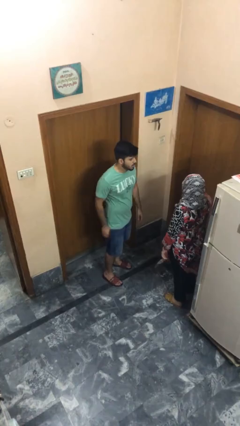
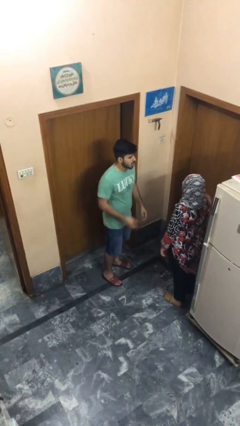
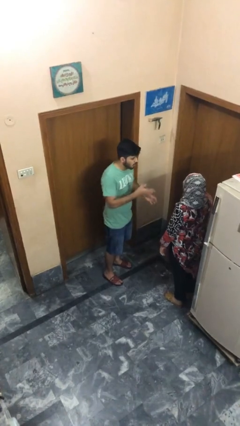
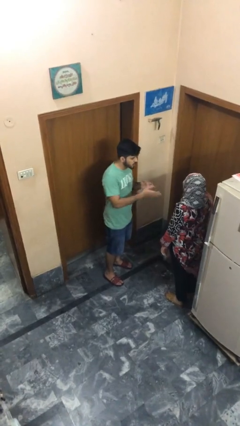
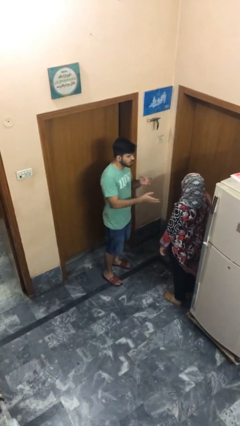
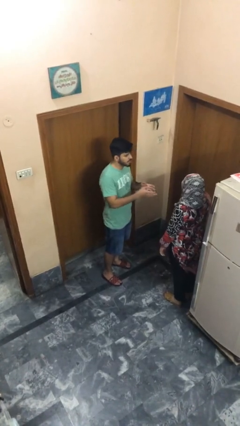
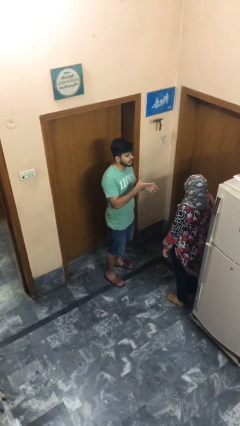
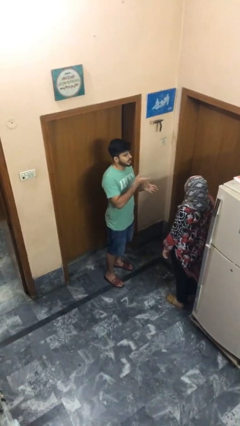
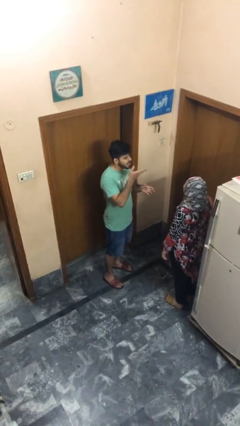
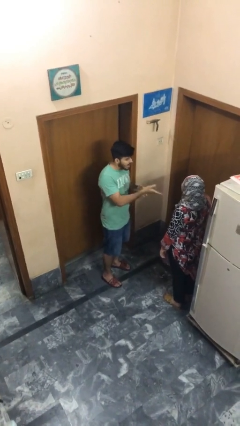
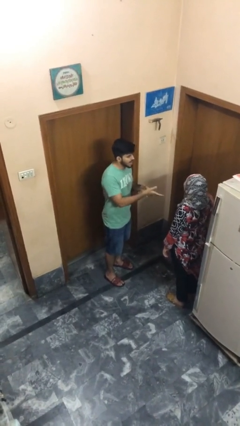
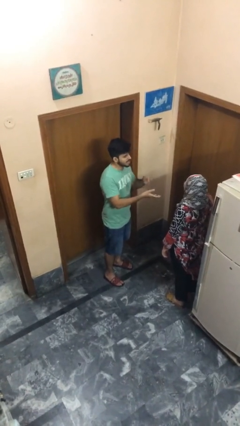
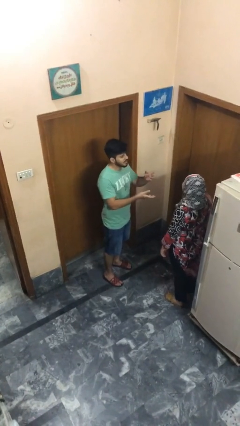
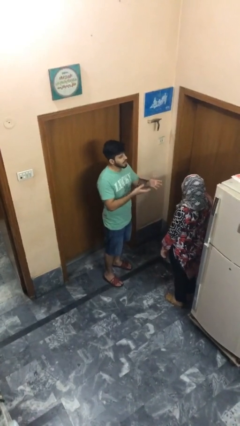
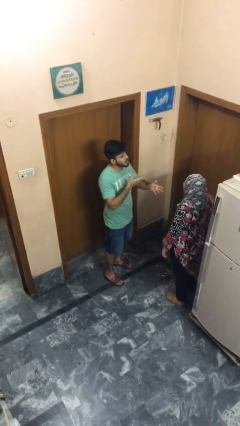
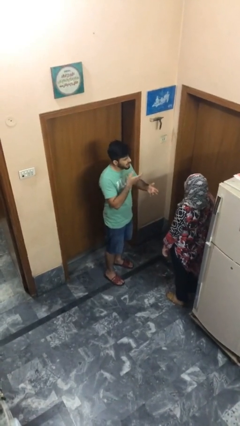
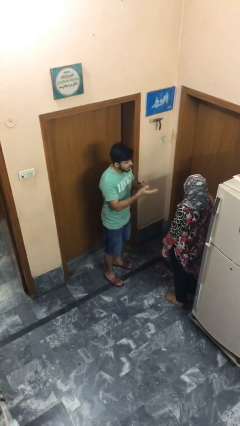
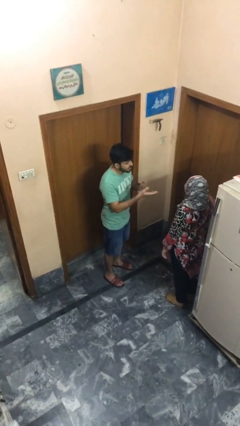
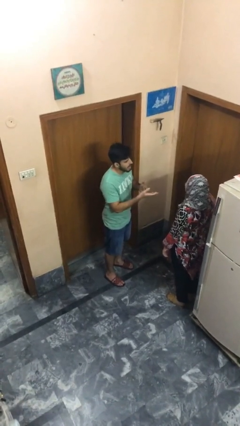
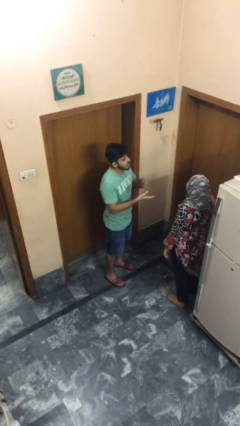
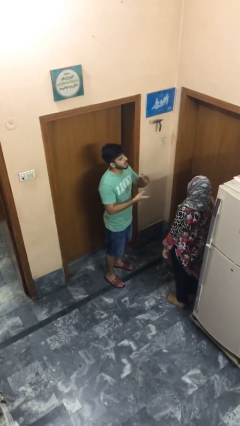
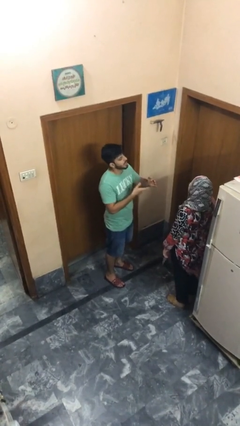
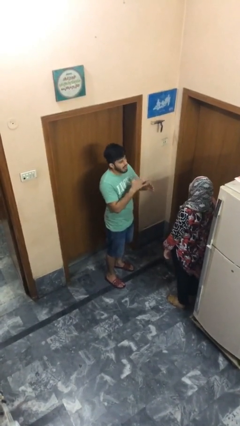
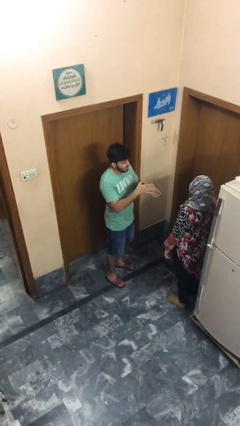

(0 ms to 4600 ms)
person talks to person

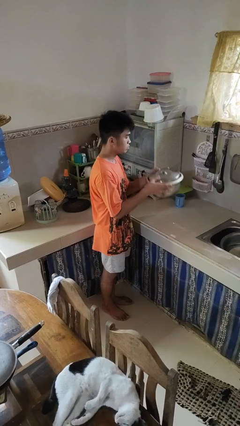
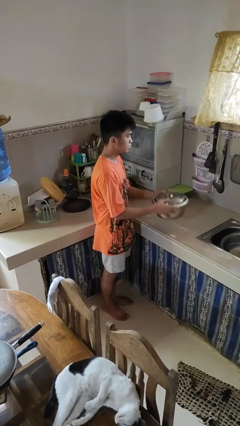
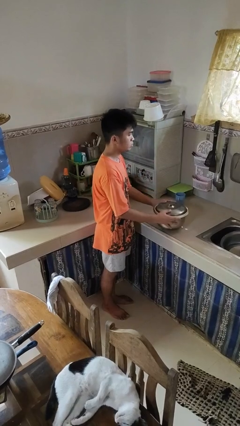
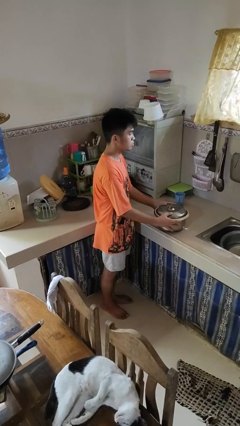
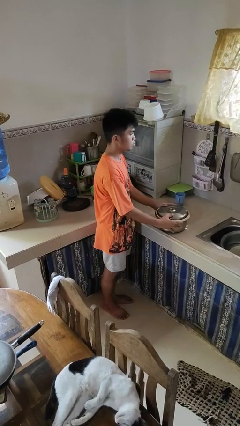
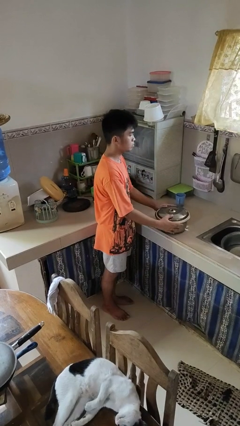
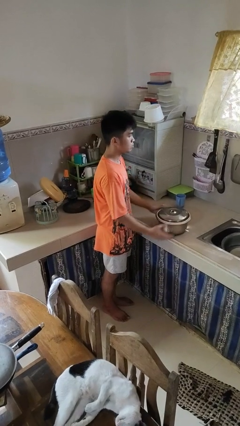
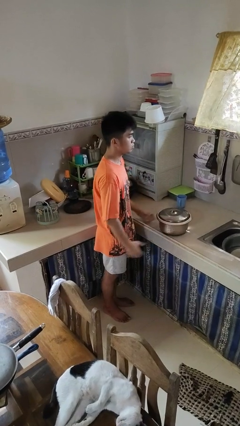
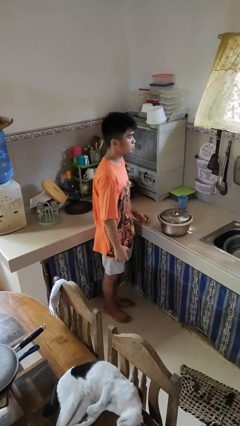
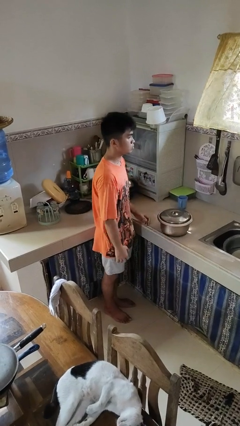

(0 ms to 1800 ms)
person puts down object on countertop

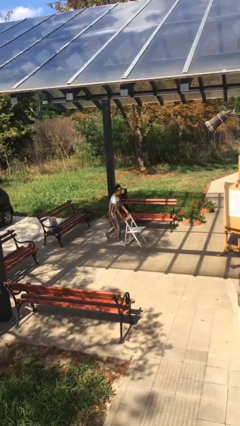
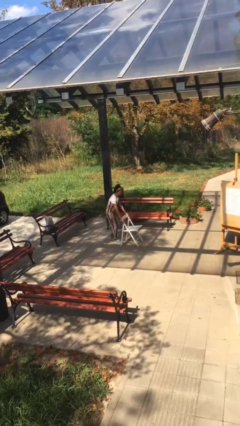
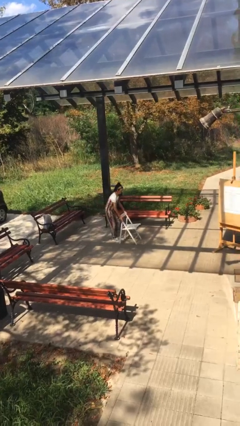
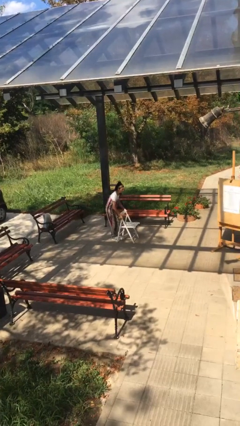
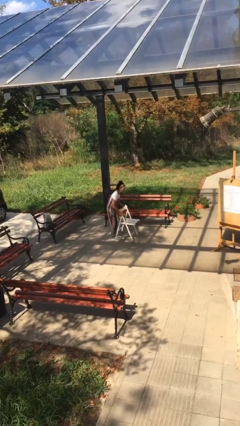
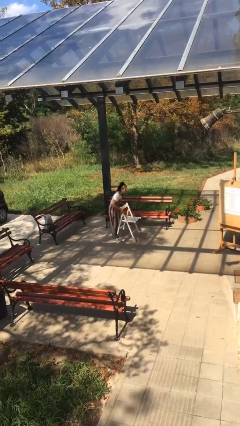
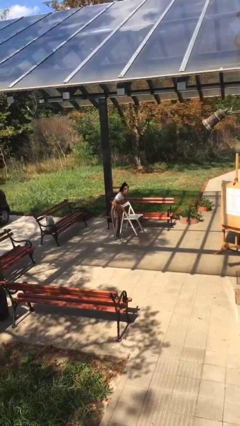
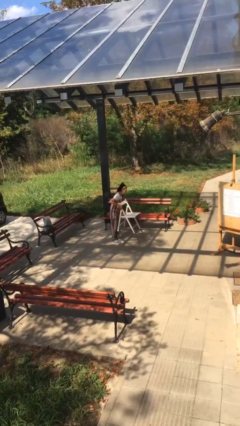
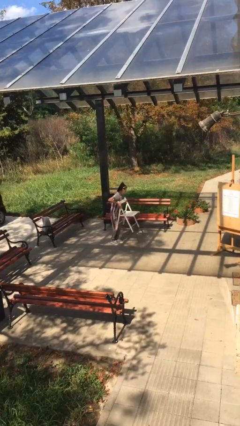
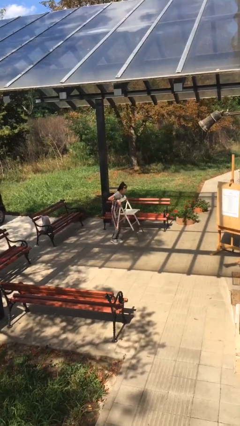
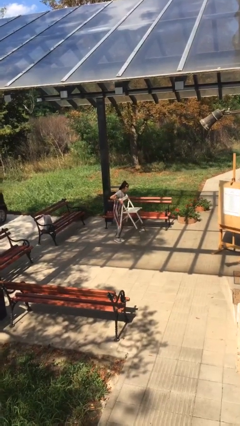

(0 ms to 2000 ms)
person picks up object from floor

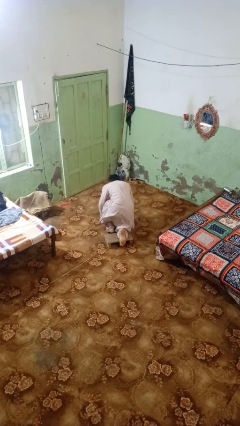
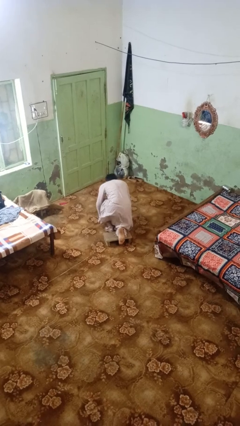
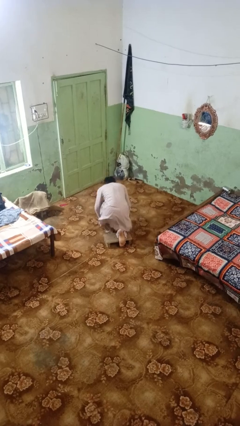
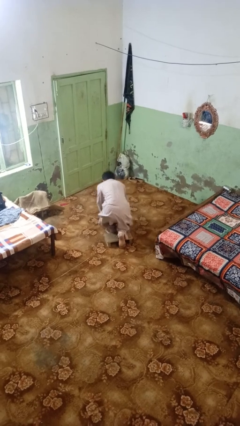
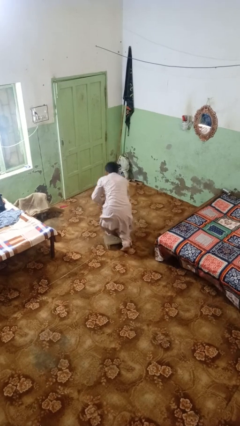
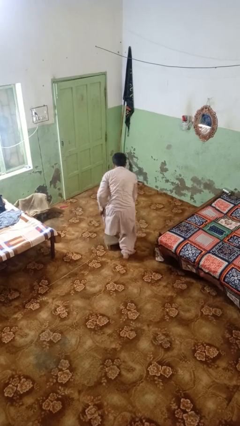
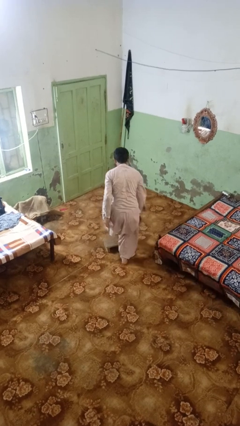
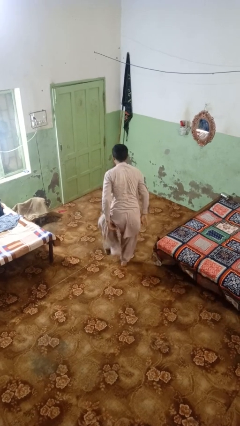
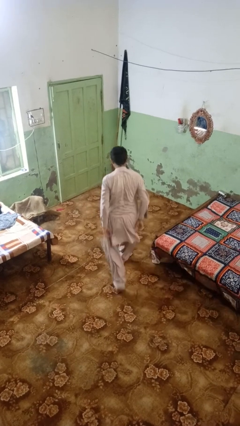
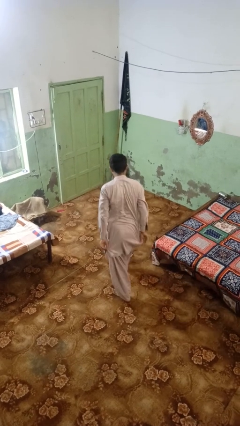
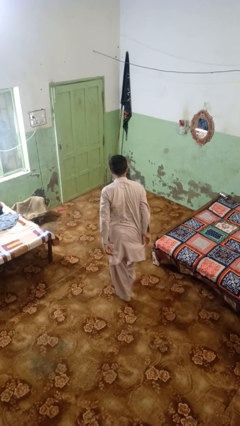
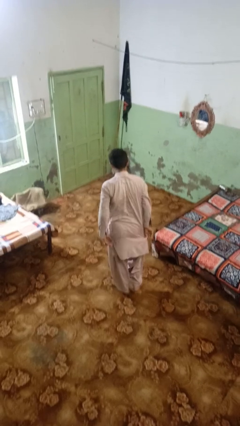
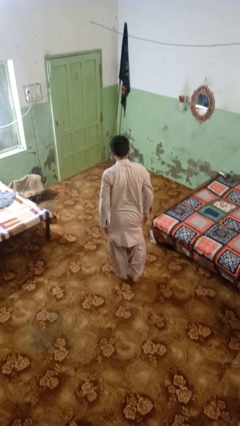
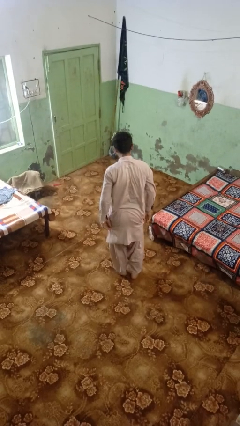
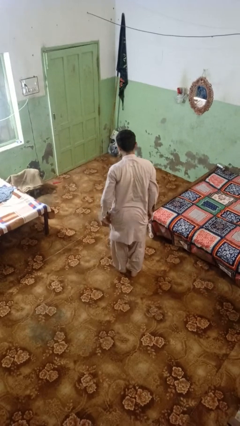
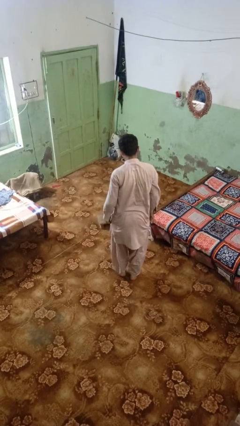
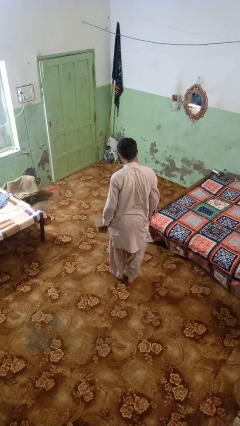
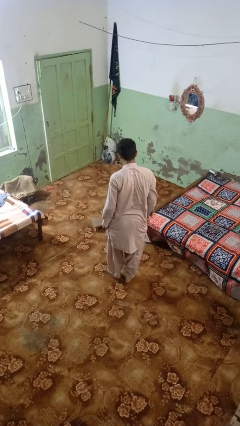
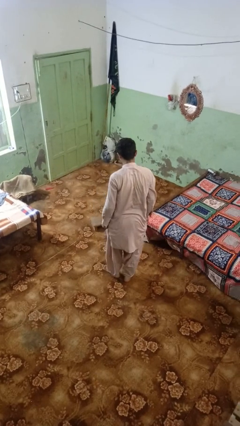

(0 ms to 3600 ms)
person stands up from floor

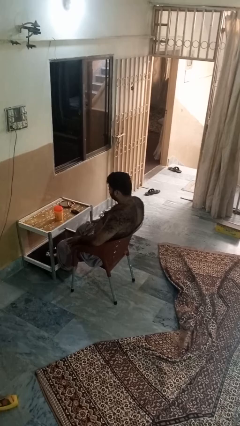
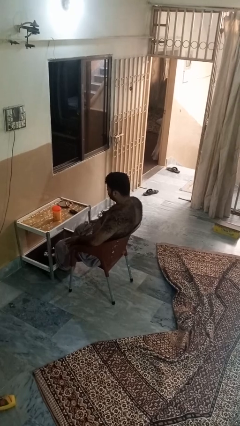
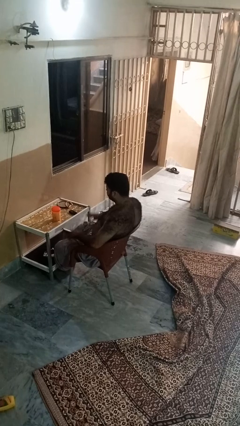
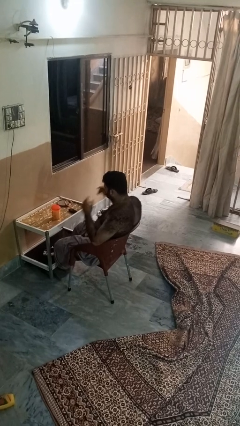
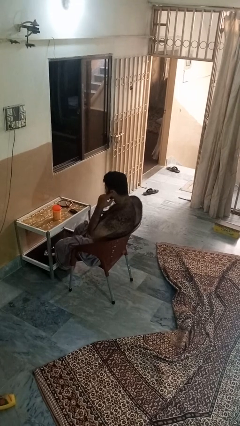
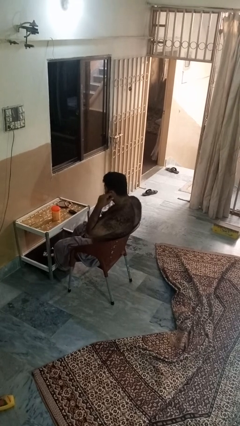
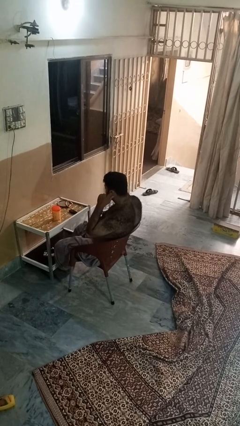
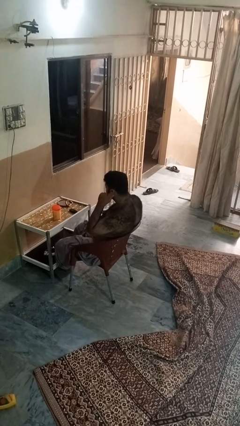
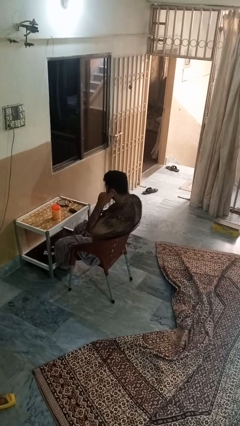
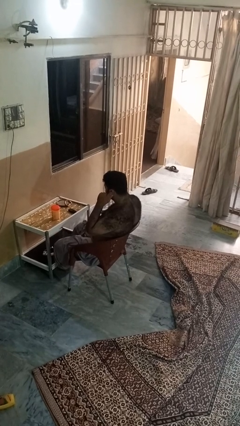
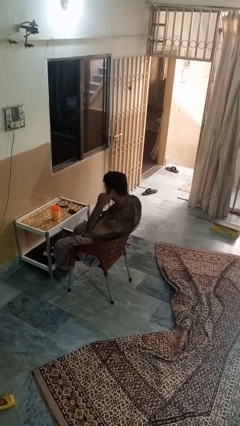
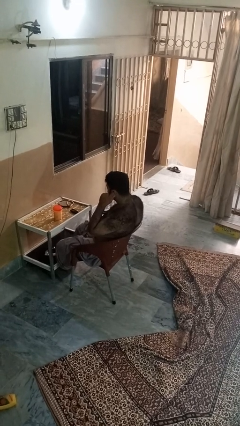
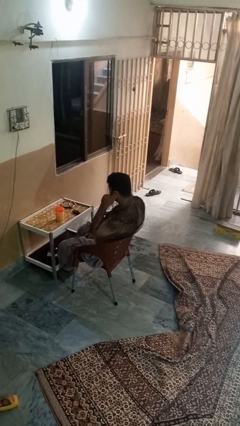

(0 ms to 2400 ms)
person puts fingers in ear

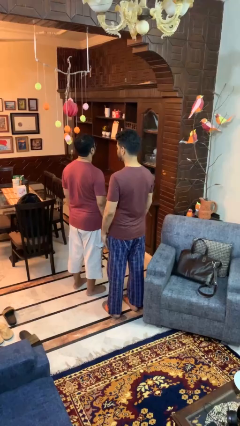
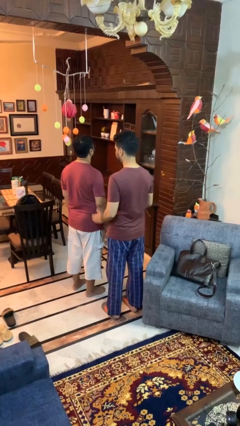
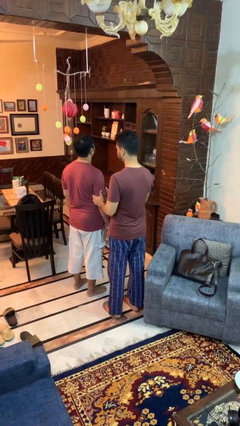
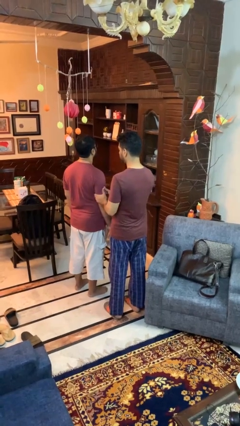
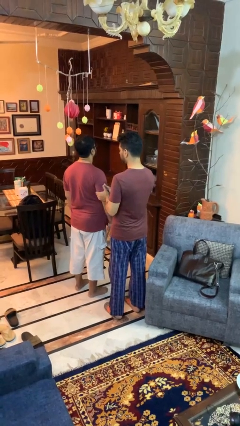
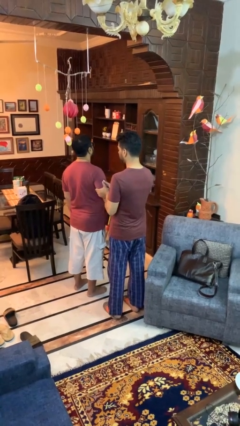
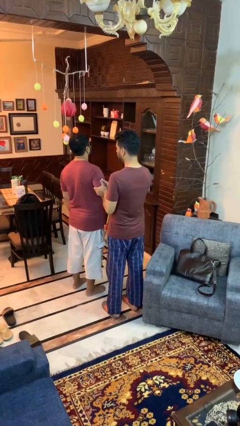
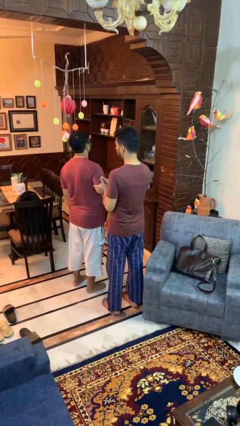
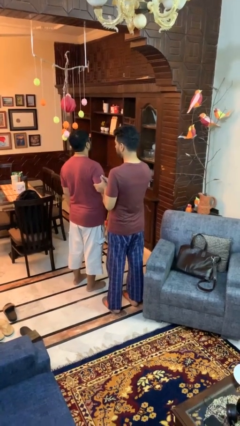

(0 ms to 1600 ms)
person grabs person by bicep

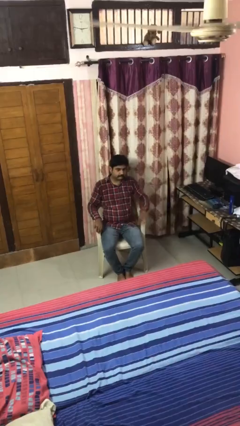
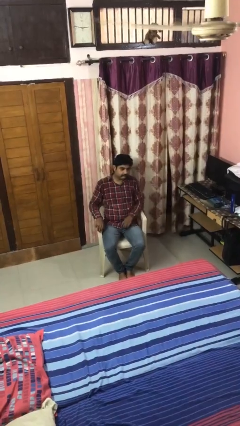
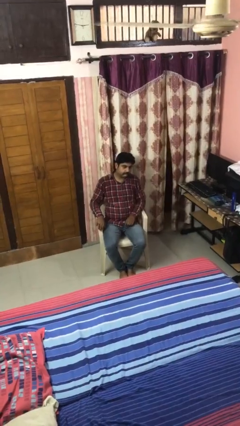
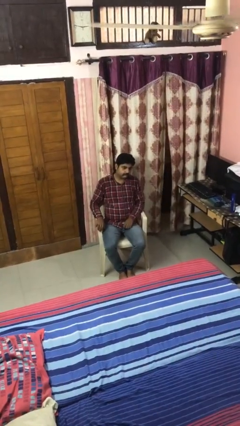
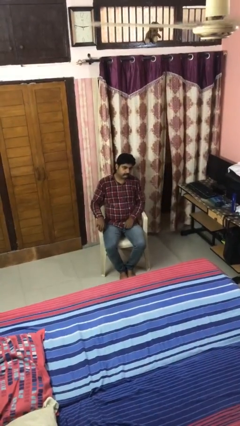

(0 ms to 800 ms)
person gestures lower hand
